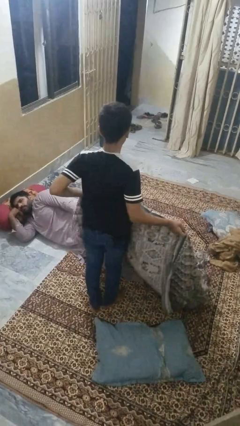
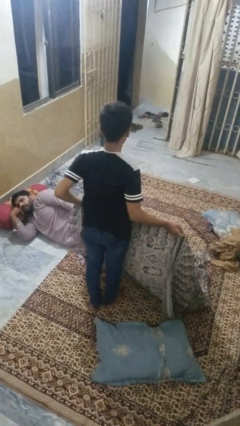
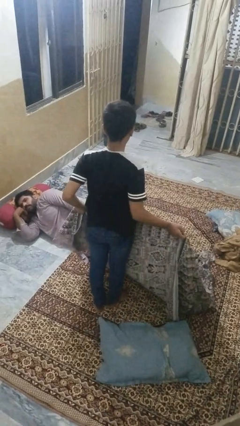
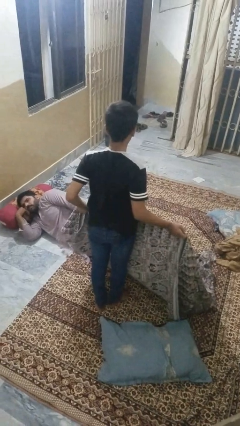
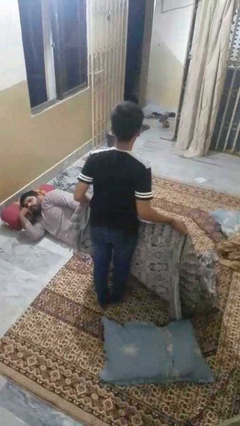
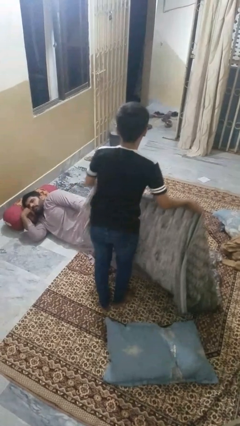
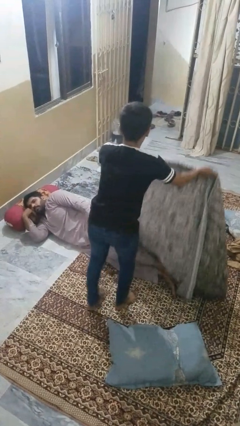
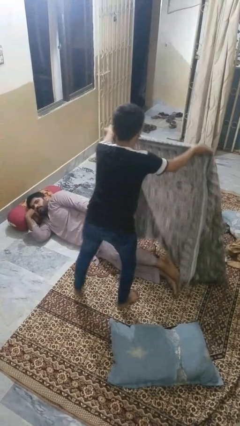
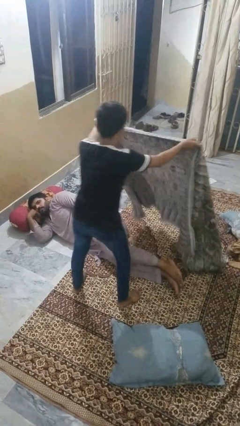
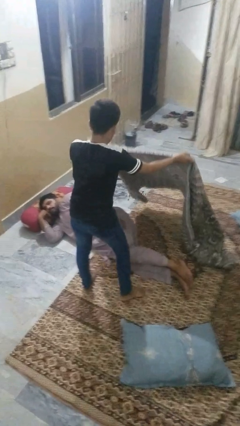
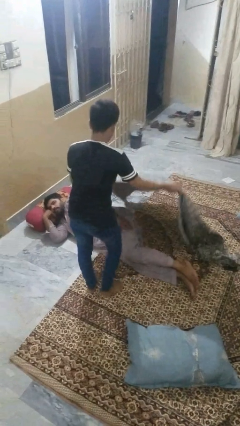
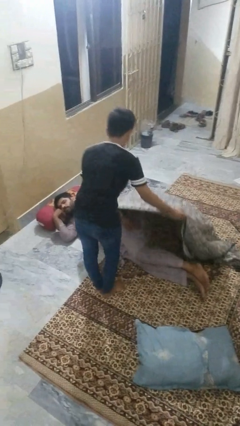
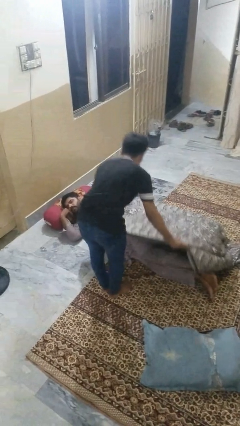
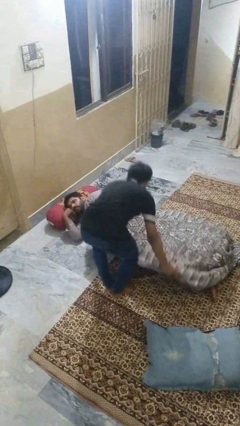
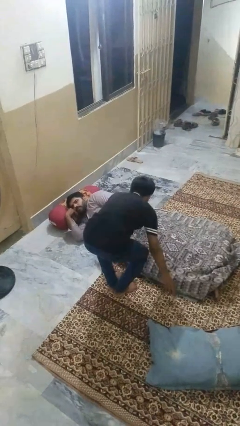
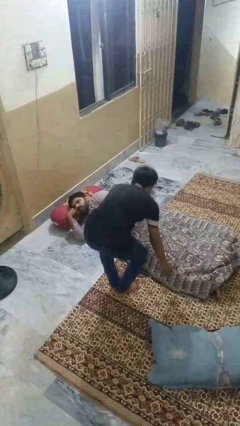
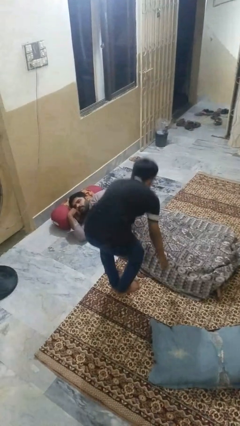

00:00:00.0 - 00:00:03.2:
person covers friend with blanket

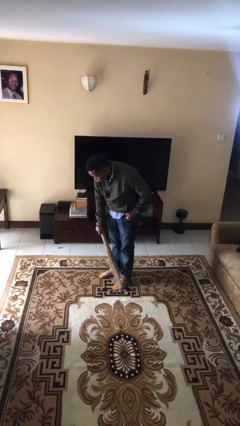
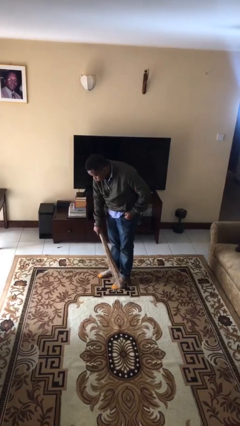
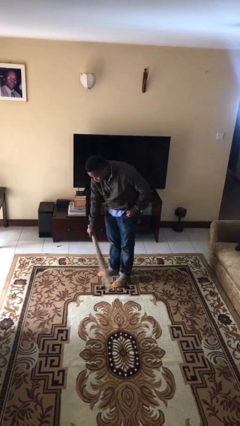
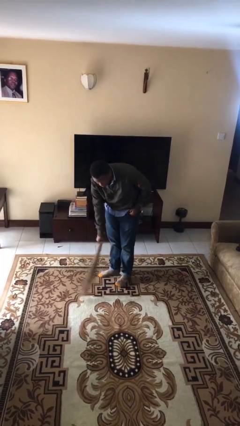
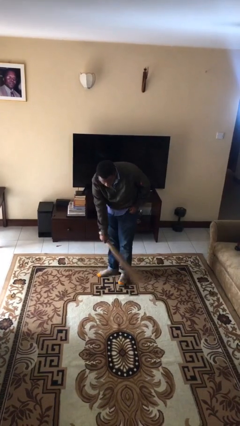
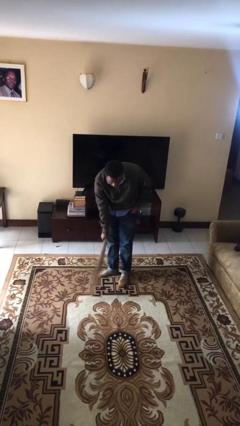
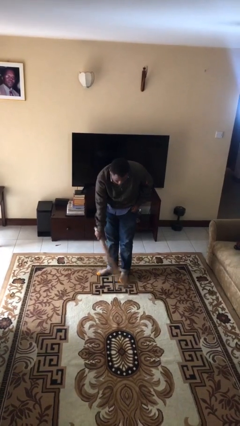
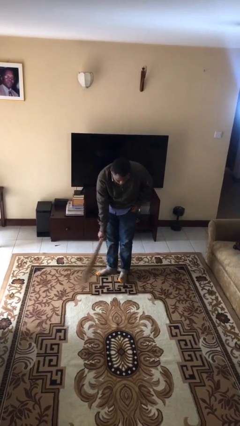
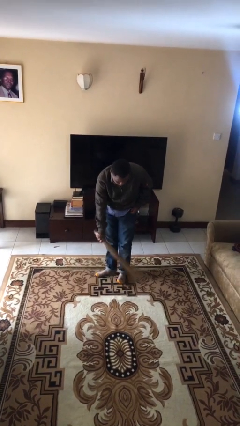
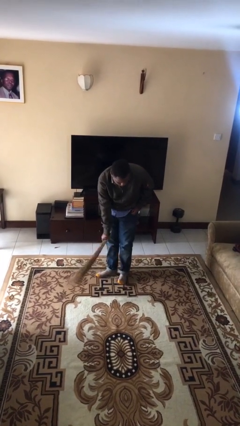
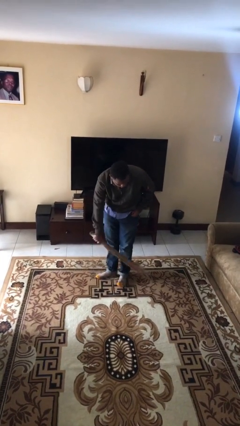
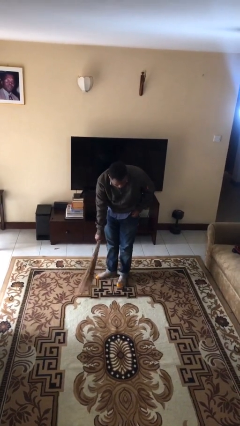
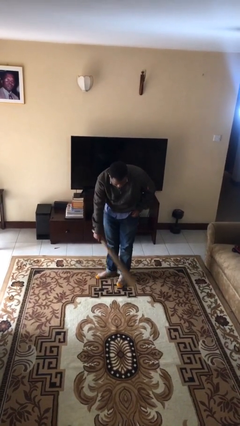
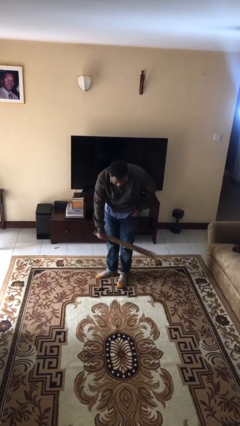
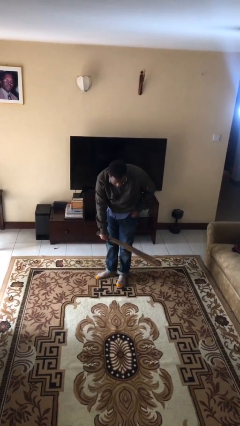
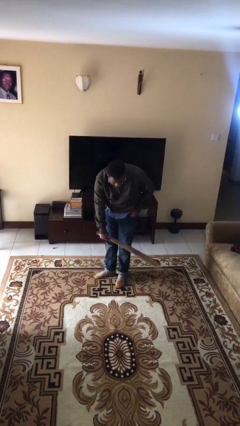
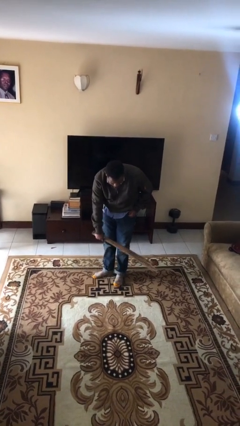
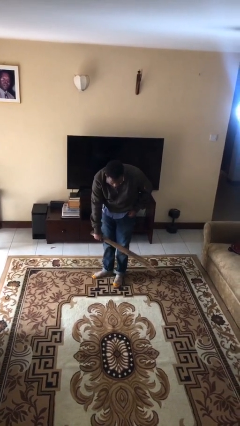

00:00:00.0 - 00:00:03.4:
person sweeps floor

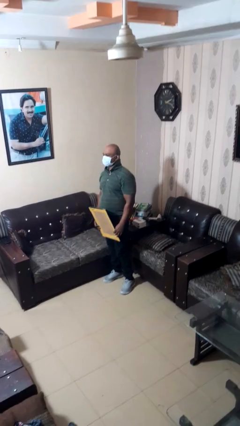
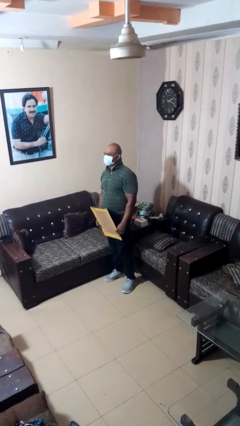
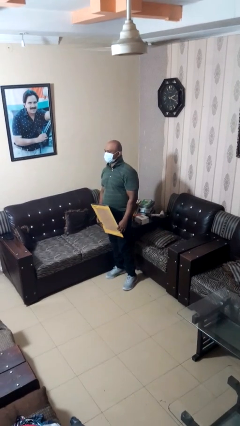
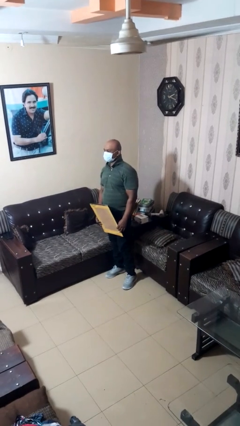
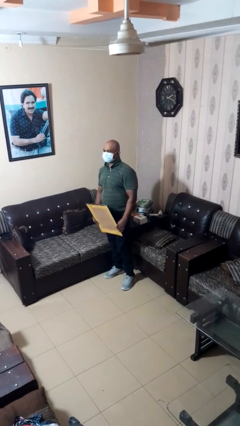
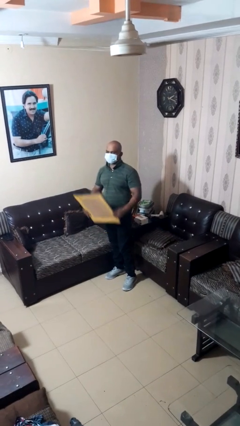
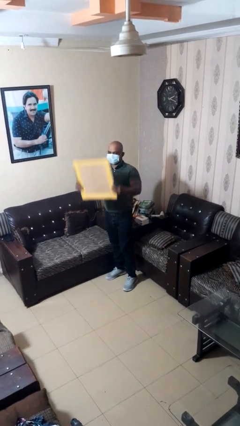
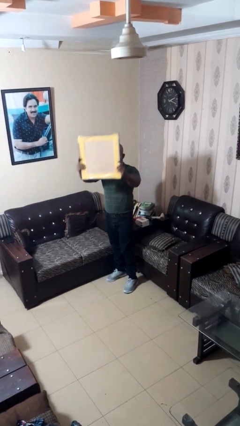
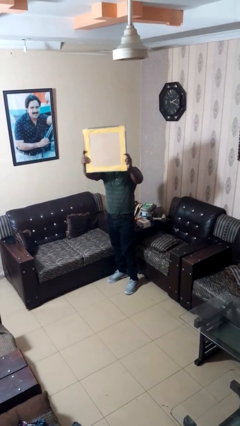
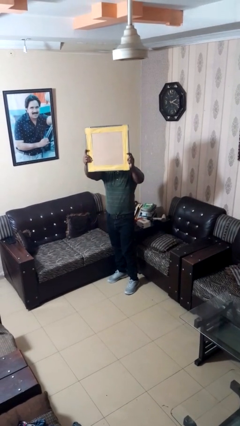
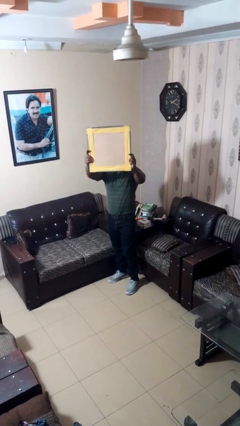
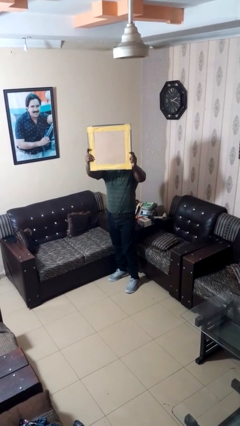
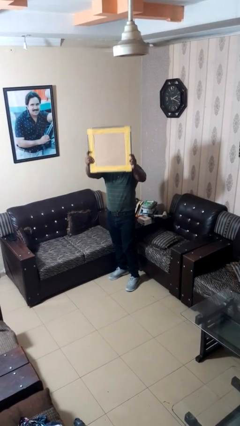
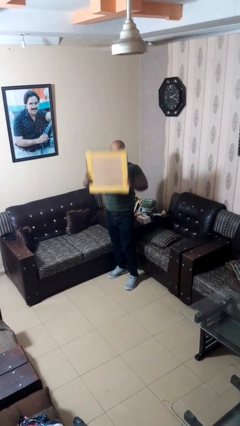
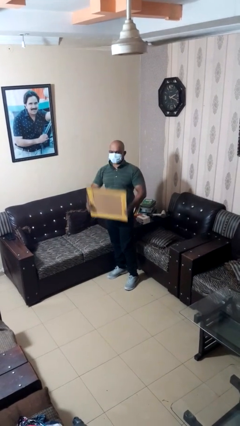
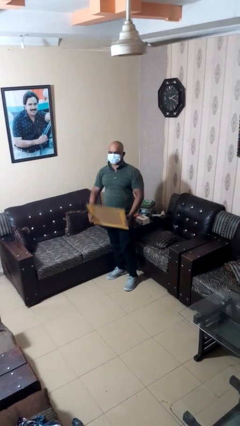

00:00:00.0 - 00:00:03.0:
person holds object above head

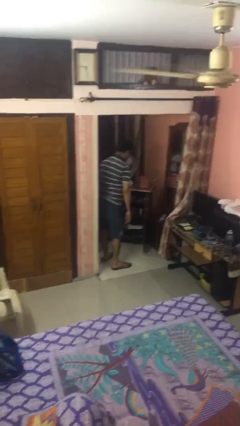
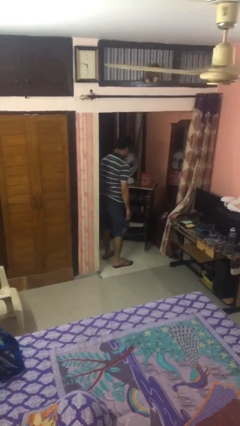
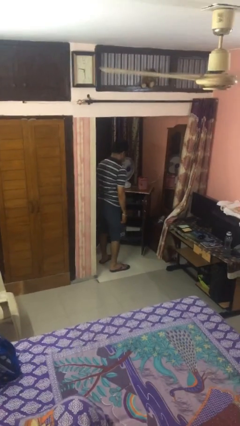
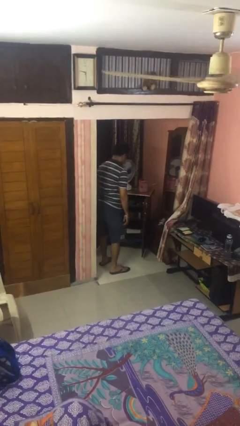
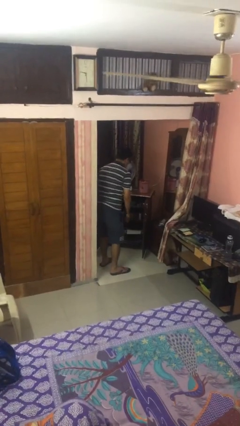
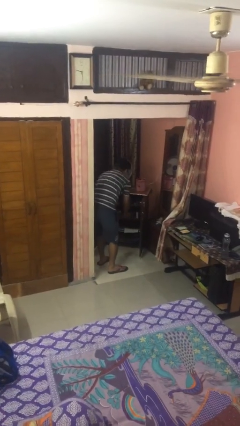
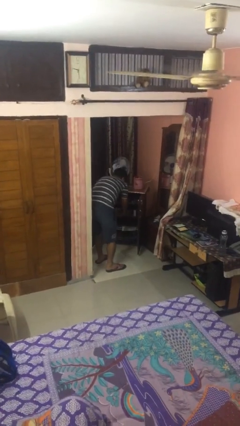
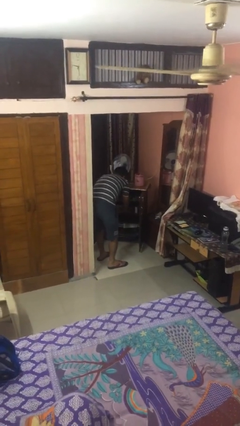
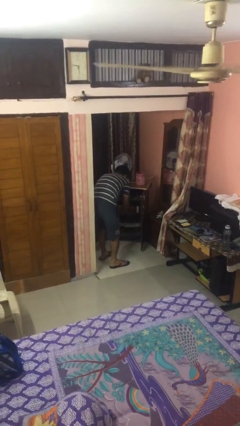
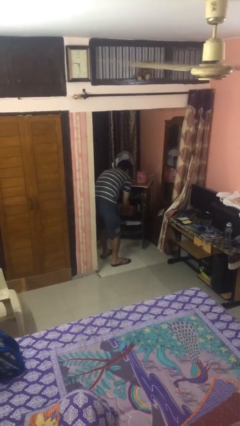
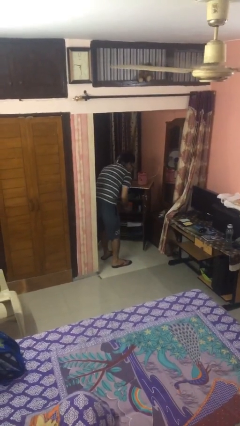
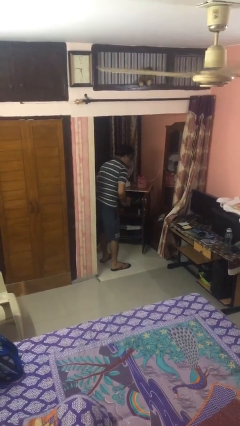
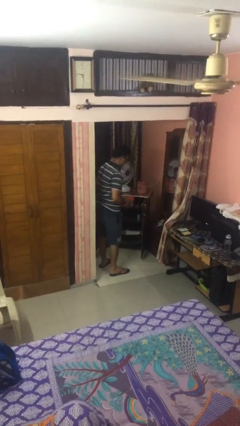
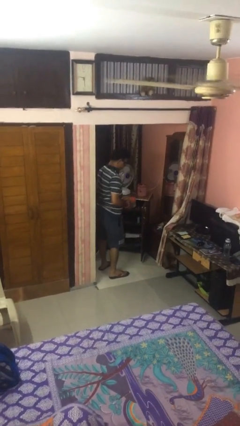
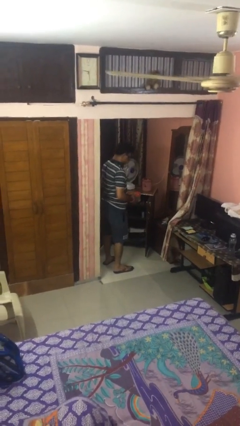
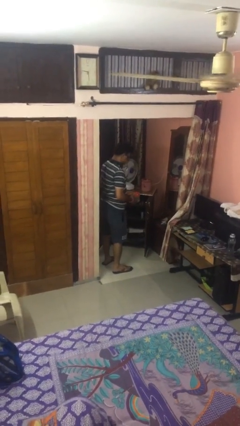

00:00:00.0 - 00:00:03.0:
person picks up object from cabinet

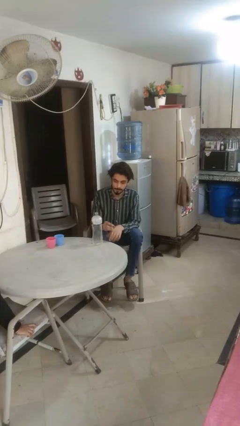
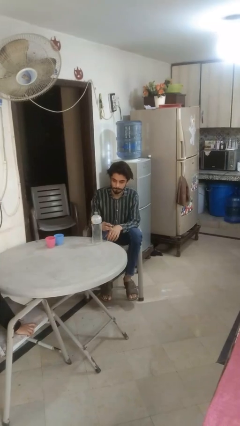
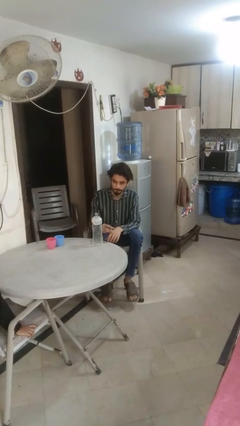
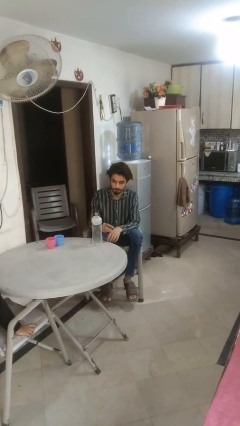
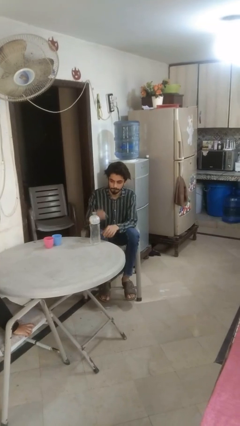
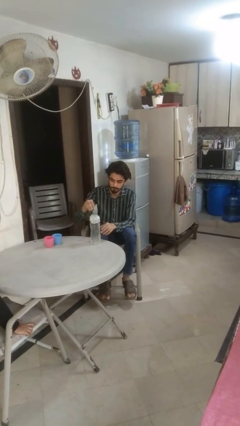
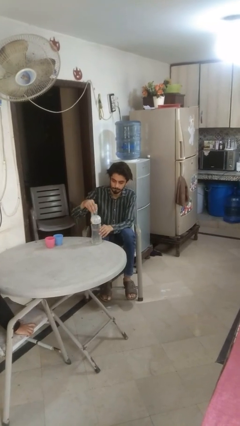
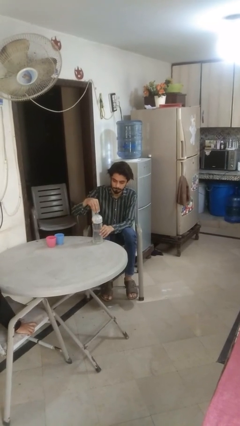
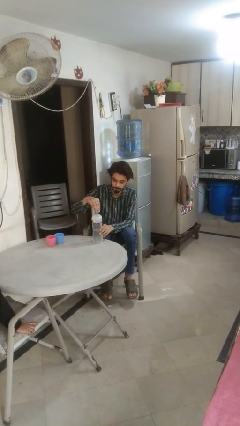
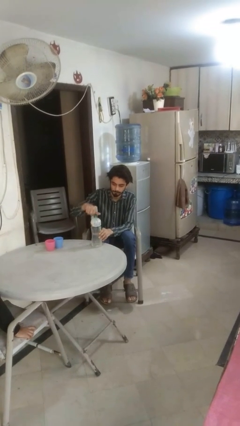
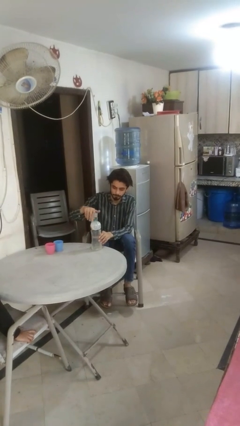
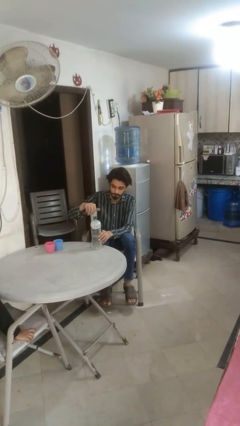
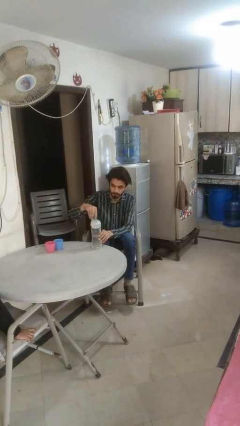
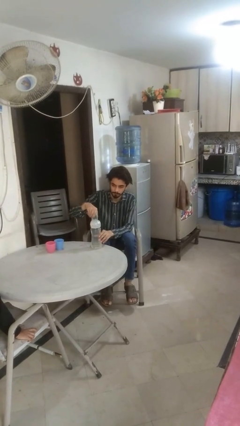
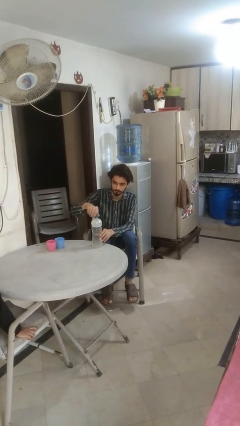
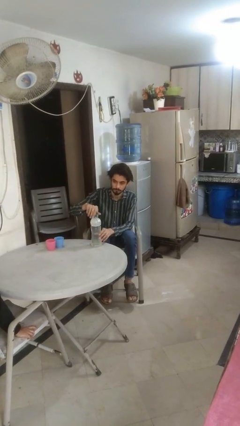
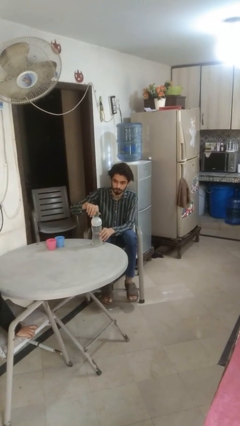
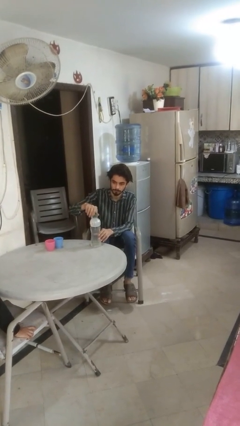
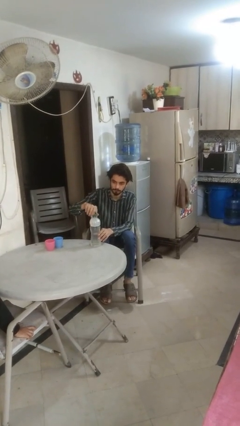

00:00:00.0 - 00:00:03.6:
person screws lid to bottle

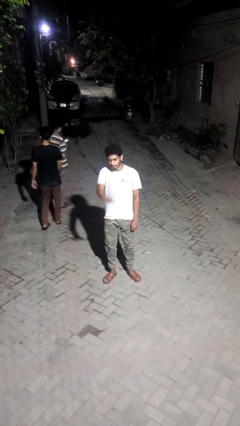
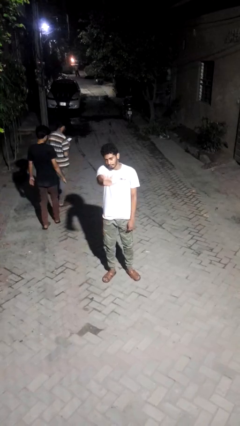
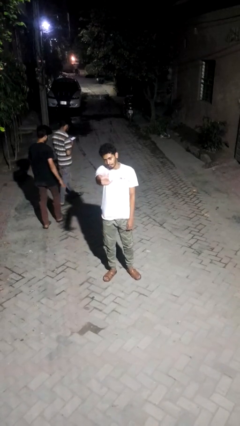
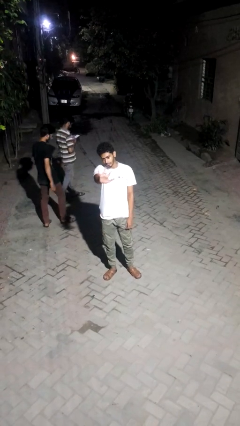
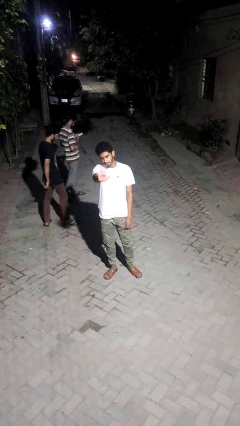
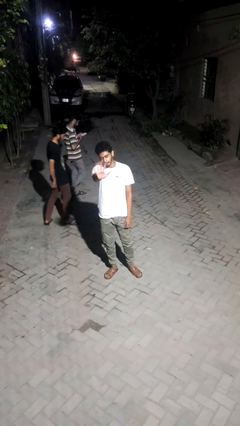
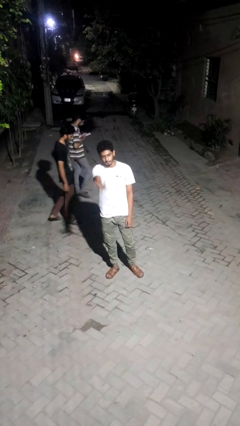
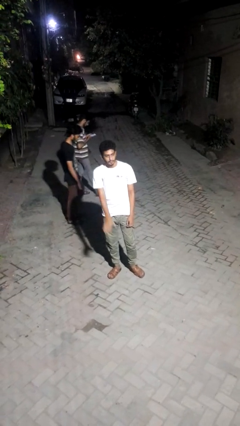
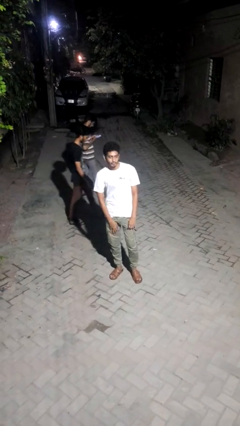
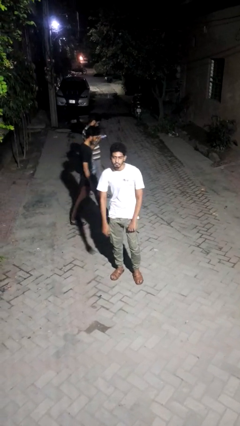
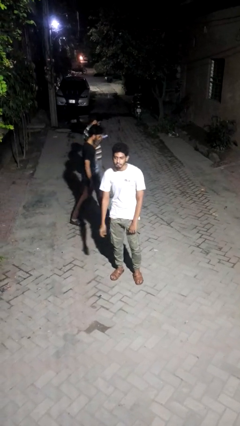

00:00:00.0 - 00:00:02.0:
person waves at person
